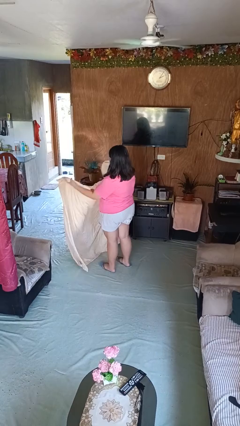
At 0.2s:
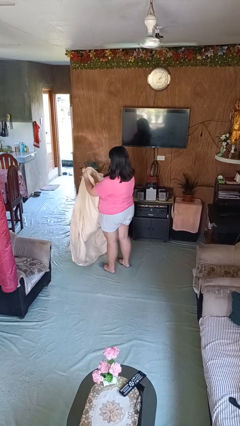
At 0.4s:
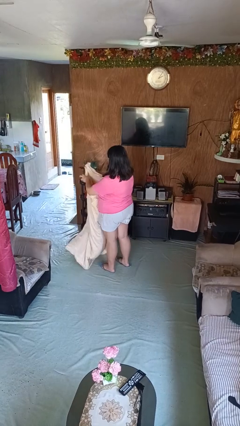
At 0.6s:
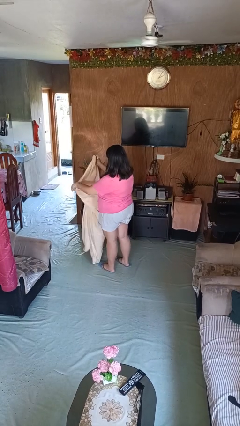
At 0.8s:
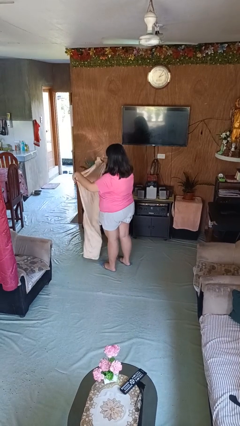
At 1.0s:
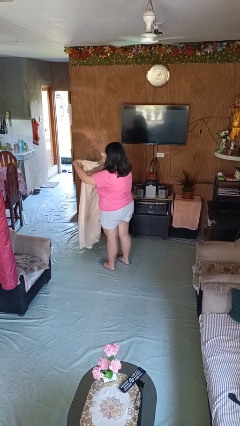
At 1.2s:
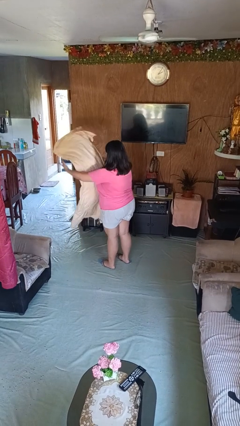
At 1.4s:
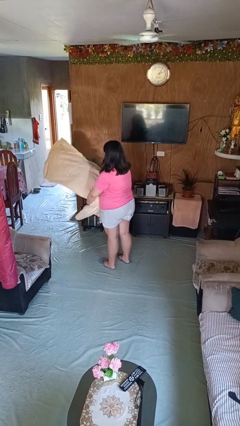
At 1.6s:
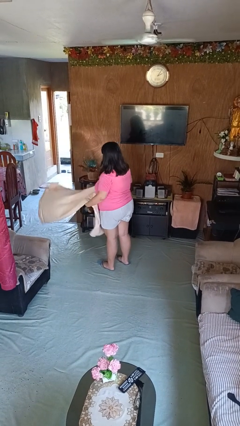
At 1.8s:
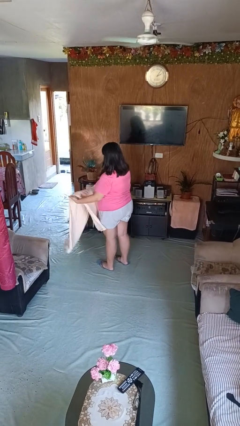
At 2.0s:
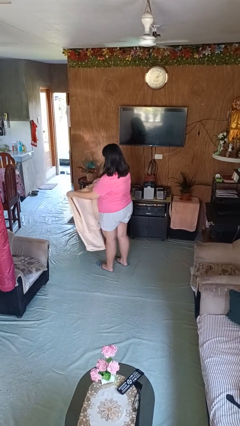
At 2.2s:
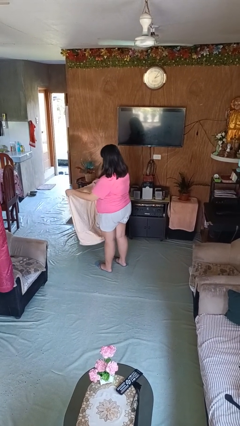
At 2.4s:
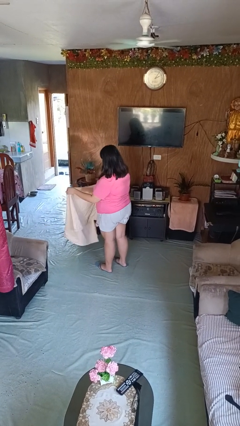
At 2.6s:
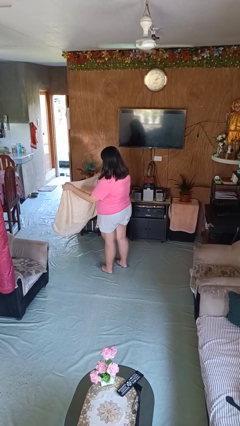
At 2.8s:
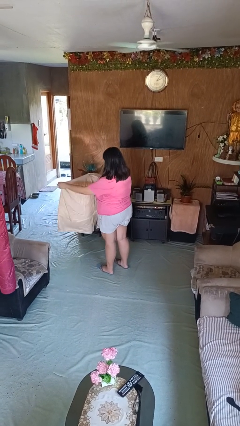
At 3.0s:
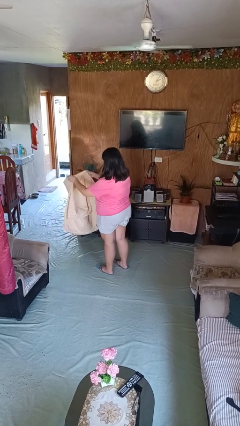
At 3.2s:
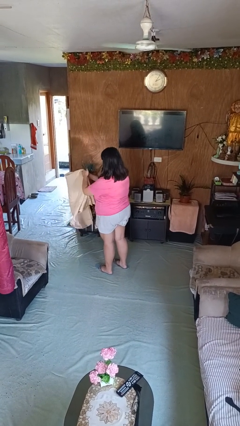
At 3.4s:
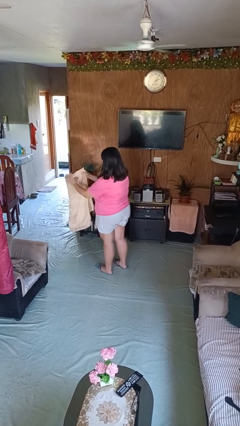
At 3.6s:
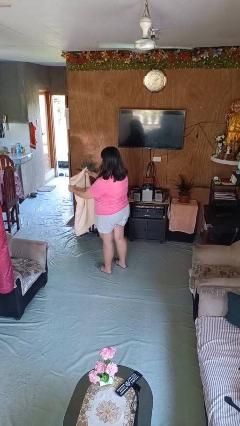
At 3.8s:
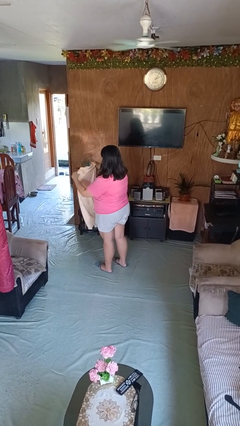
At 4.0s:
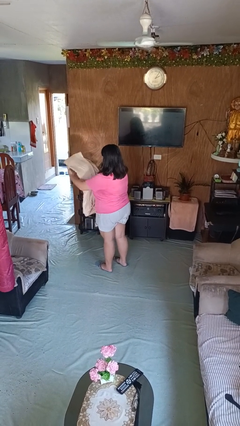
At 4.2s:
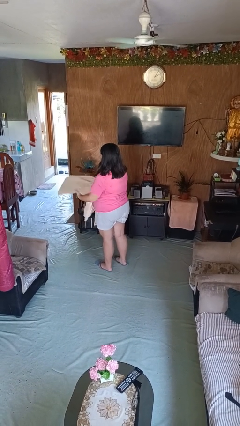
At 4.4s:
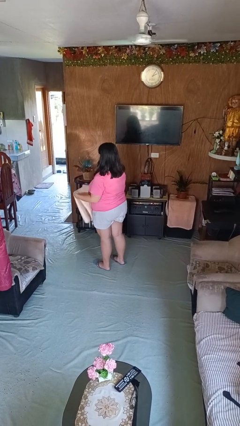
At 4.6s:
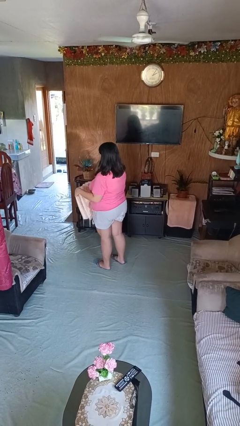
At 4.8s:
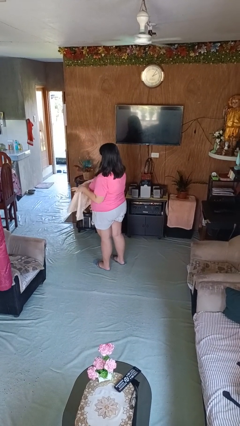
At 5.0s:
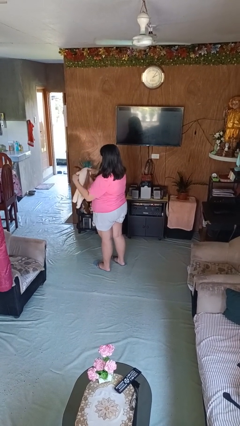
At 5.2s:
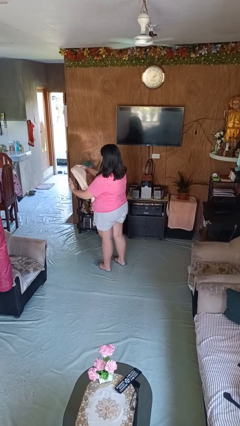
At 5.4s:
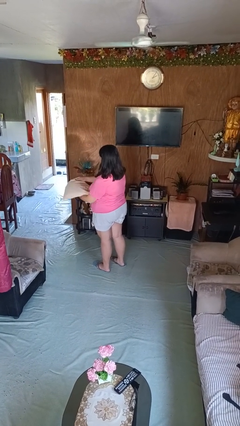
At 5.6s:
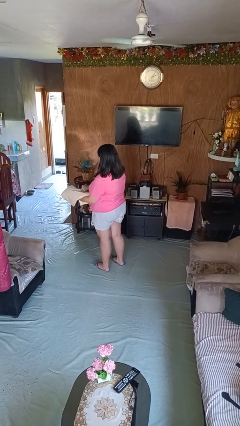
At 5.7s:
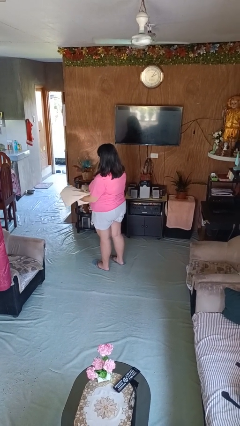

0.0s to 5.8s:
person folds blanket

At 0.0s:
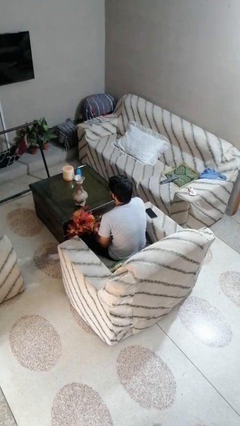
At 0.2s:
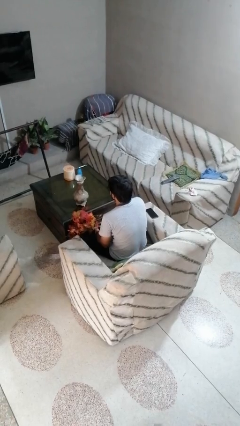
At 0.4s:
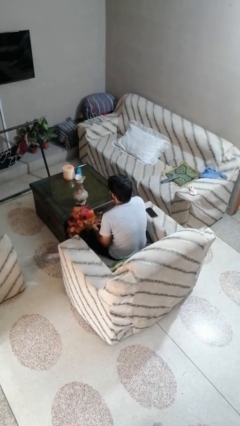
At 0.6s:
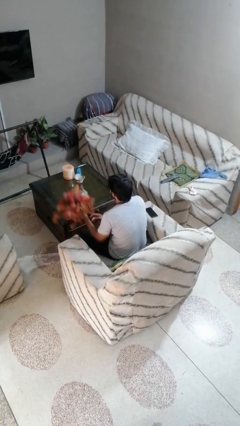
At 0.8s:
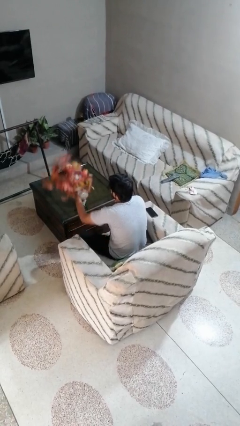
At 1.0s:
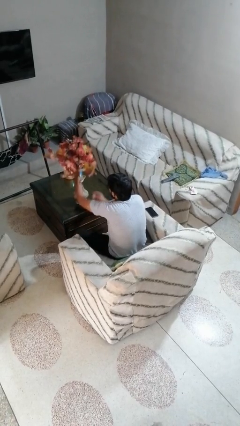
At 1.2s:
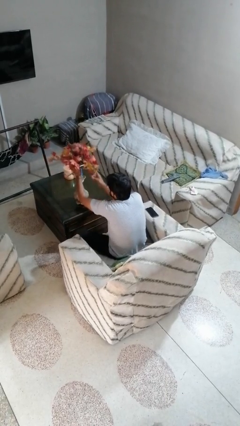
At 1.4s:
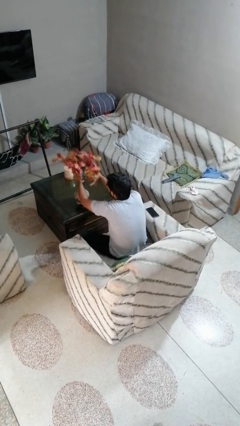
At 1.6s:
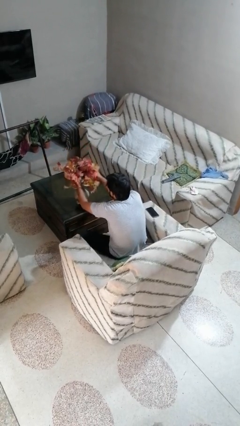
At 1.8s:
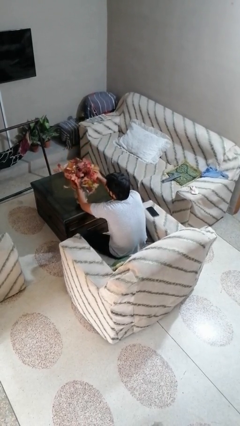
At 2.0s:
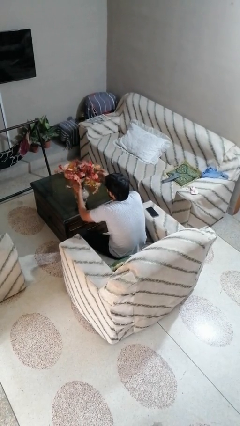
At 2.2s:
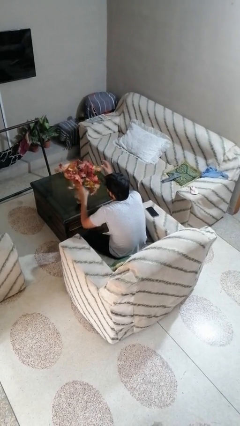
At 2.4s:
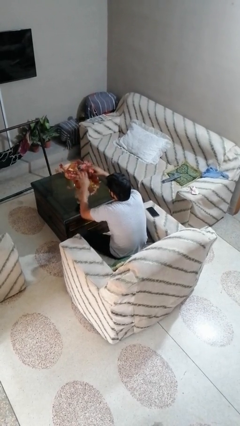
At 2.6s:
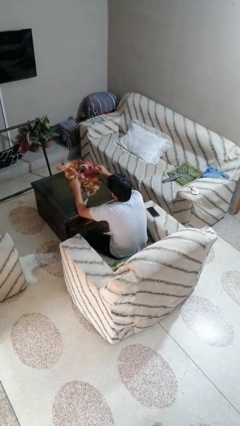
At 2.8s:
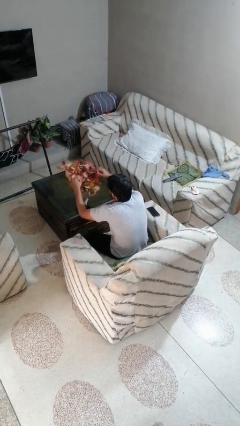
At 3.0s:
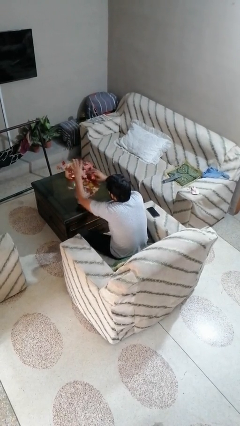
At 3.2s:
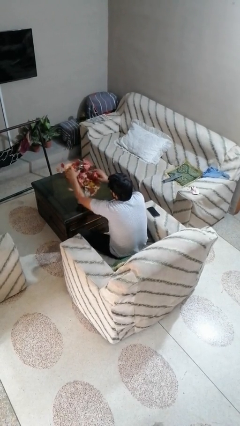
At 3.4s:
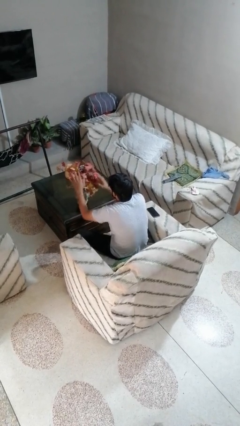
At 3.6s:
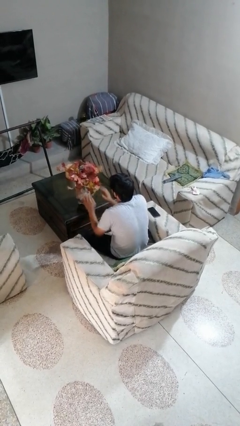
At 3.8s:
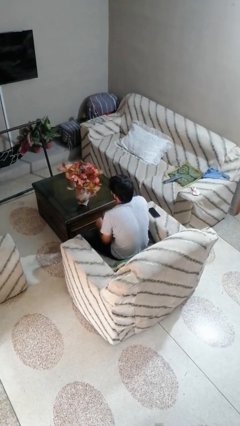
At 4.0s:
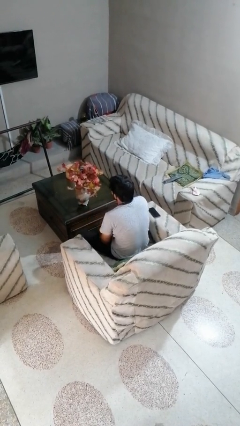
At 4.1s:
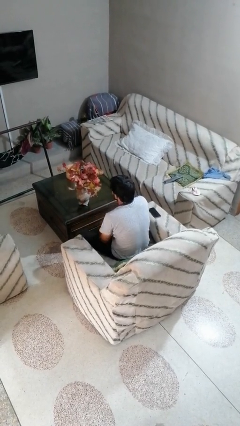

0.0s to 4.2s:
person arranges flowers in vase

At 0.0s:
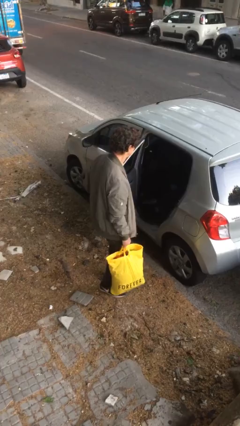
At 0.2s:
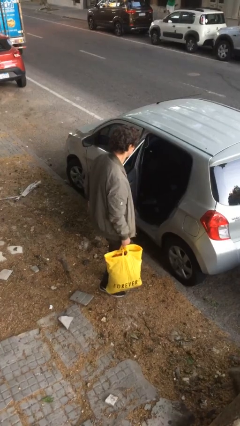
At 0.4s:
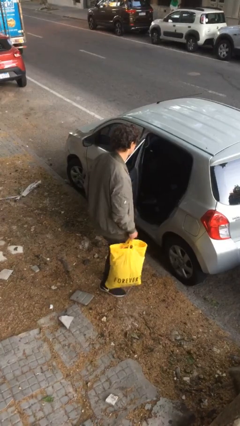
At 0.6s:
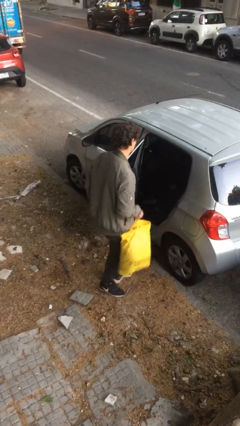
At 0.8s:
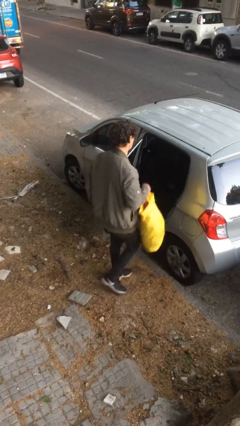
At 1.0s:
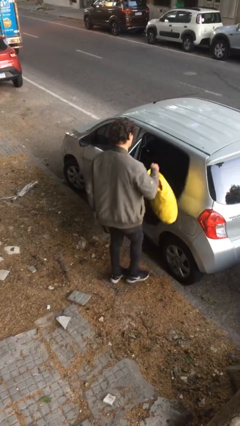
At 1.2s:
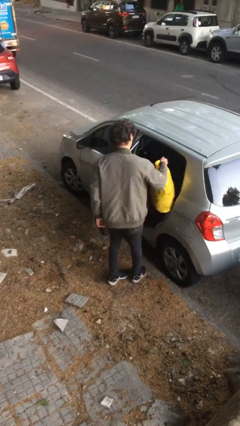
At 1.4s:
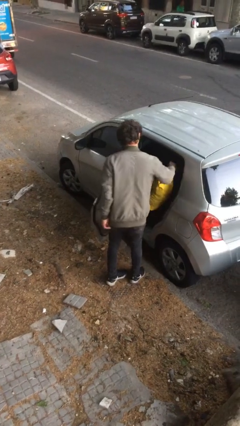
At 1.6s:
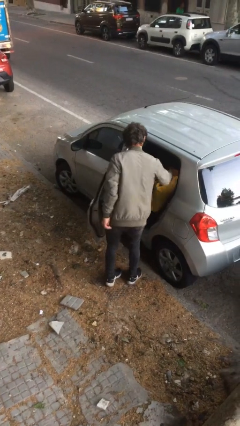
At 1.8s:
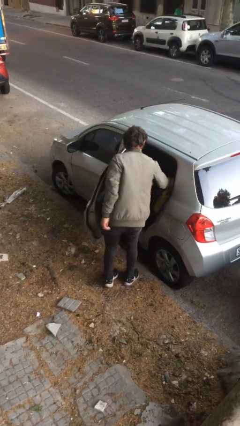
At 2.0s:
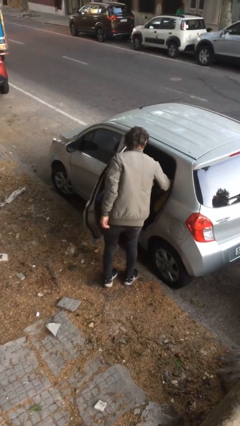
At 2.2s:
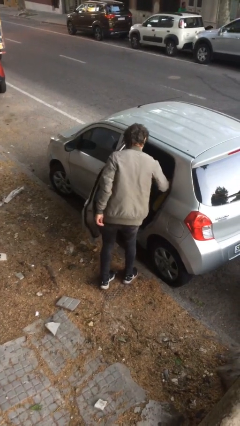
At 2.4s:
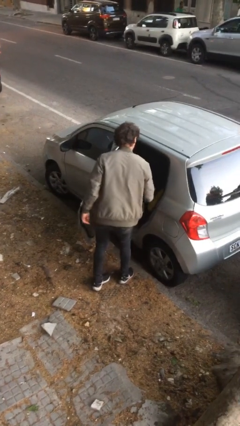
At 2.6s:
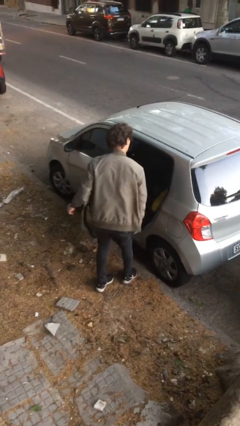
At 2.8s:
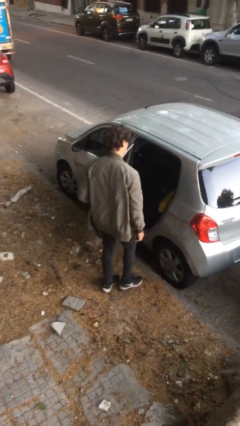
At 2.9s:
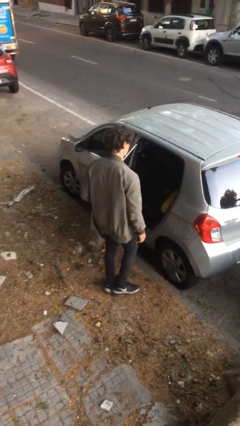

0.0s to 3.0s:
person loads car

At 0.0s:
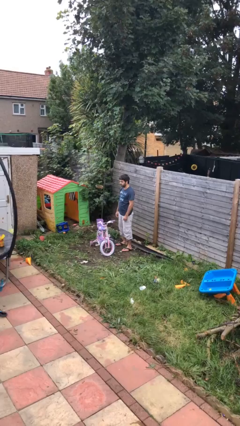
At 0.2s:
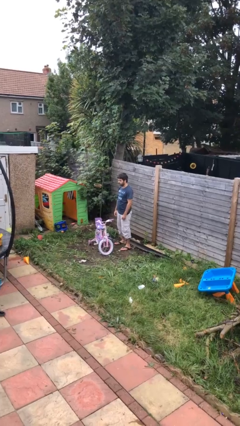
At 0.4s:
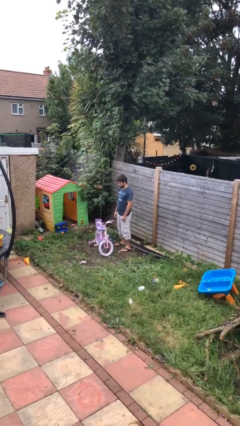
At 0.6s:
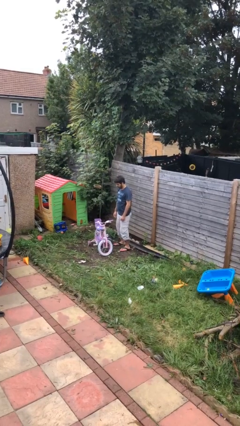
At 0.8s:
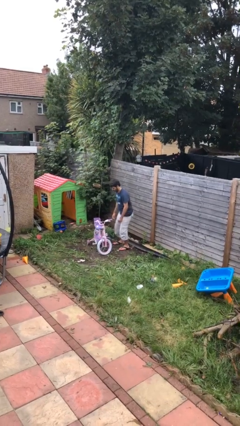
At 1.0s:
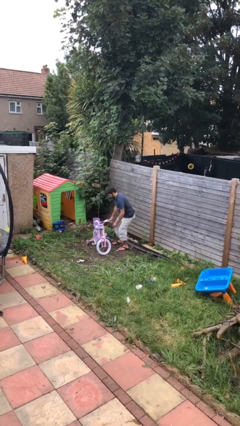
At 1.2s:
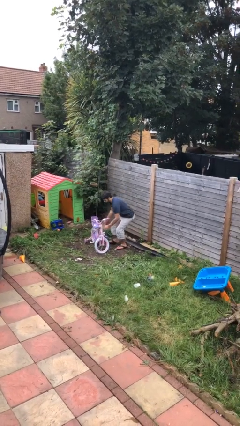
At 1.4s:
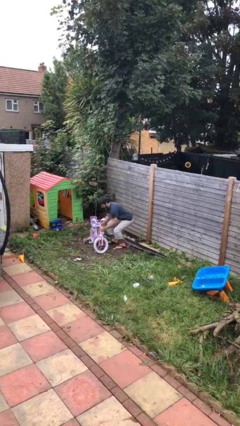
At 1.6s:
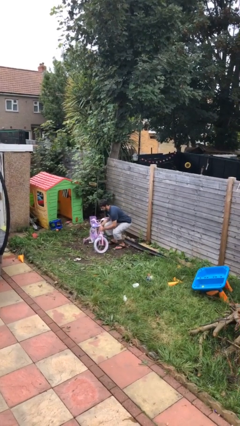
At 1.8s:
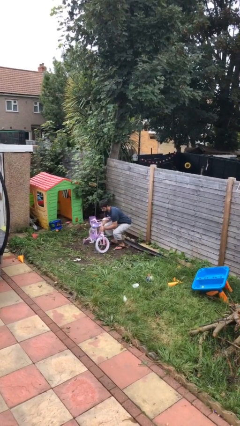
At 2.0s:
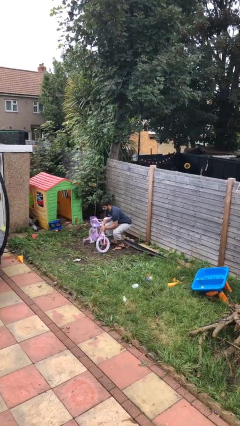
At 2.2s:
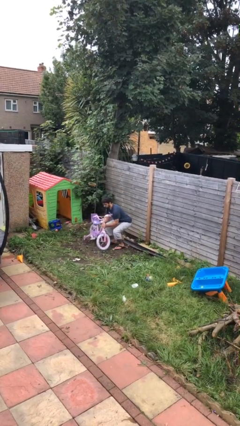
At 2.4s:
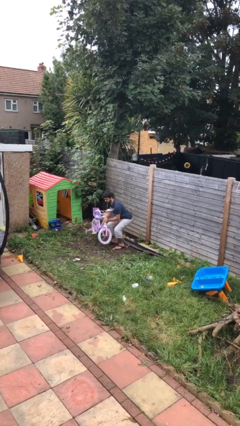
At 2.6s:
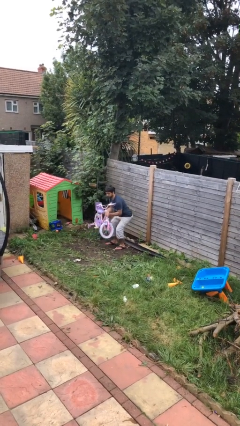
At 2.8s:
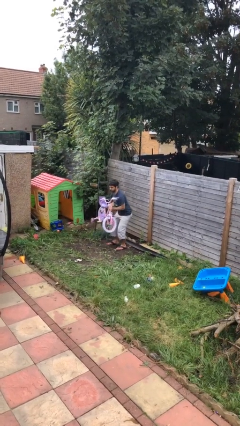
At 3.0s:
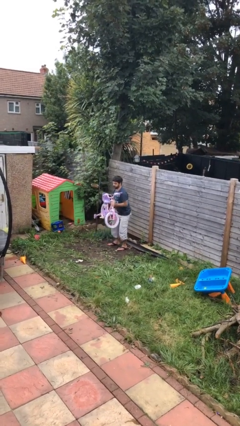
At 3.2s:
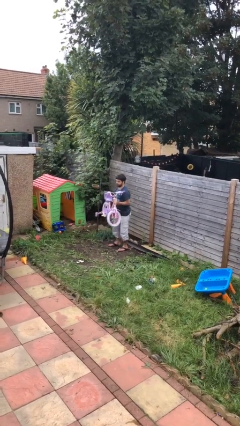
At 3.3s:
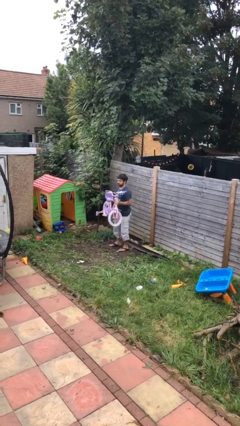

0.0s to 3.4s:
person picks up object from floor

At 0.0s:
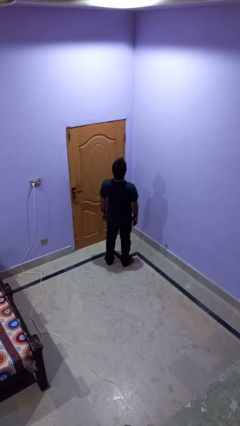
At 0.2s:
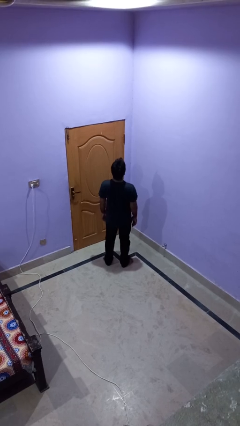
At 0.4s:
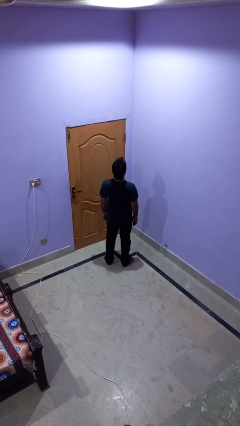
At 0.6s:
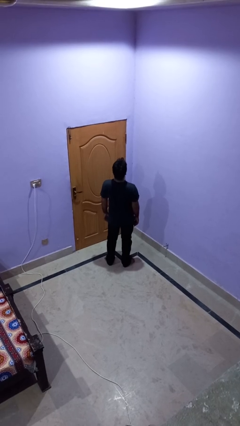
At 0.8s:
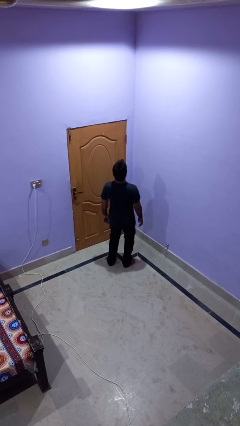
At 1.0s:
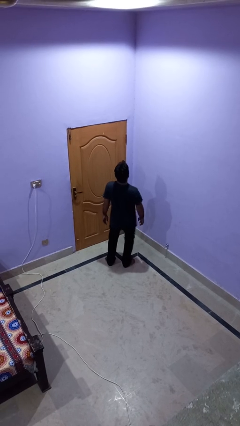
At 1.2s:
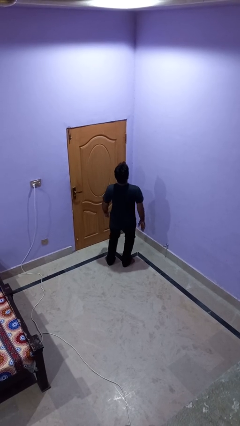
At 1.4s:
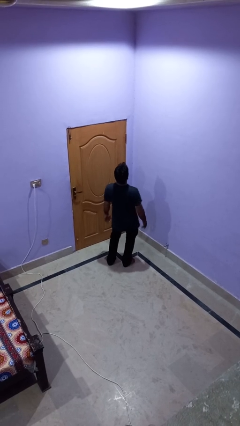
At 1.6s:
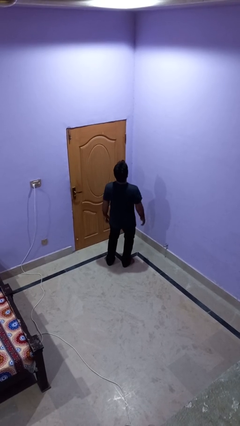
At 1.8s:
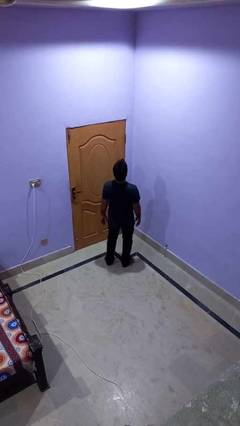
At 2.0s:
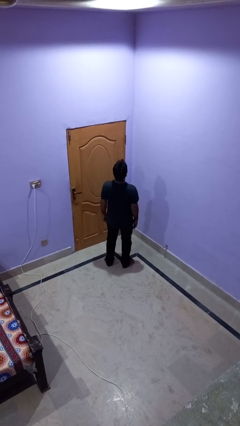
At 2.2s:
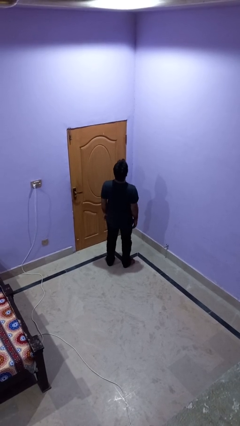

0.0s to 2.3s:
person wiggles hips
